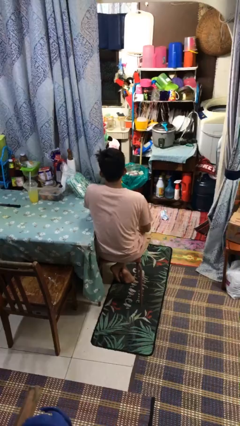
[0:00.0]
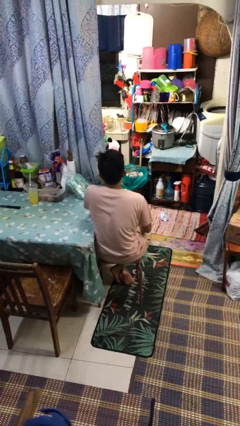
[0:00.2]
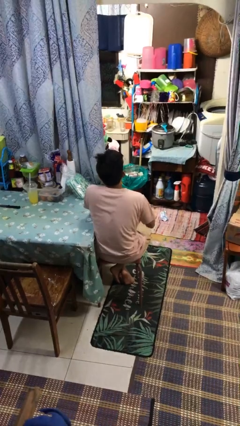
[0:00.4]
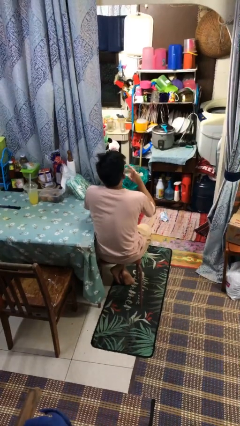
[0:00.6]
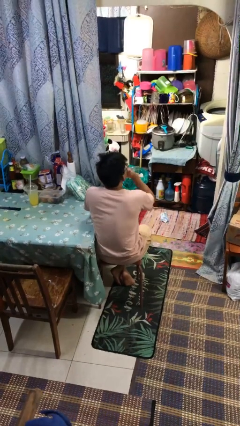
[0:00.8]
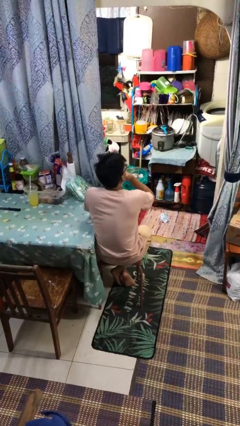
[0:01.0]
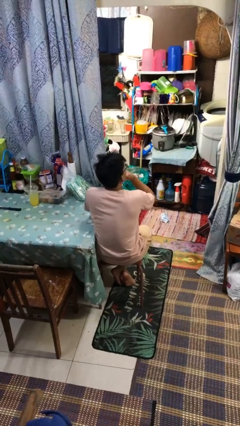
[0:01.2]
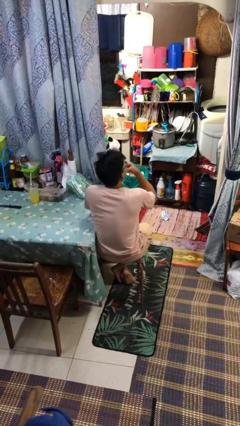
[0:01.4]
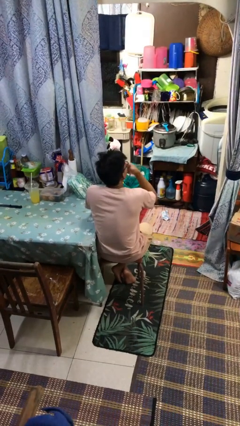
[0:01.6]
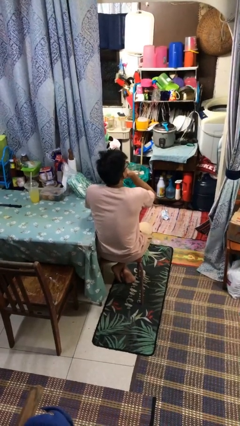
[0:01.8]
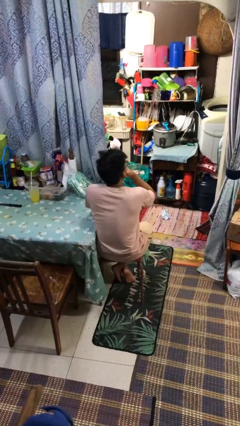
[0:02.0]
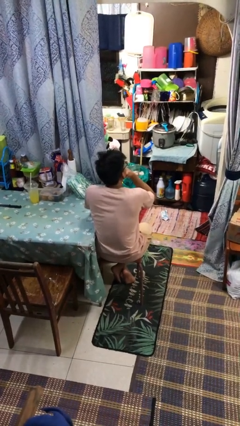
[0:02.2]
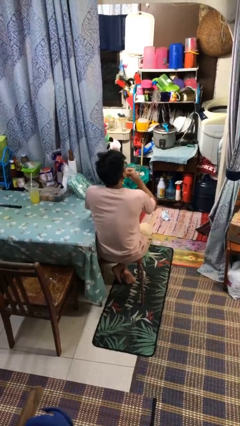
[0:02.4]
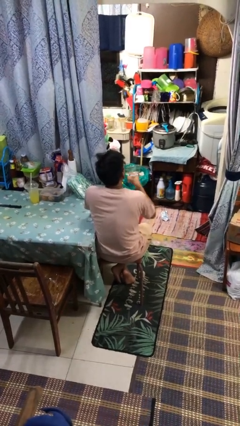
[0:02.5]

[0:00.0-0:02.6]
person strokes chin

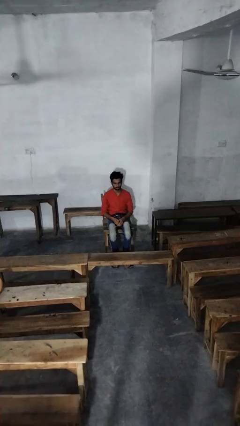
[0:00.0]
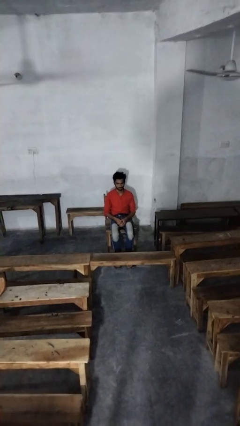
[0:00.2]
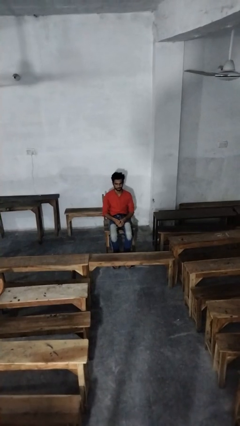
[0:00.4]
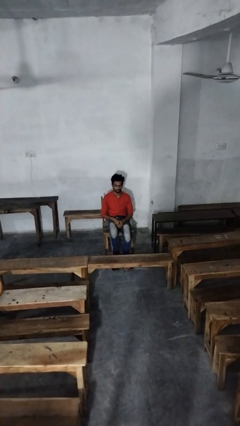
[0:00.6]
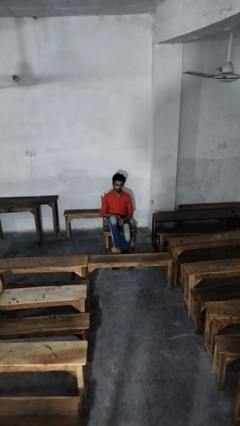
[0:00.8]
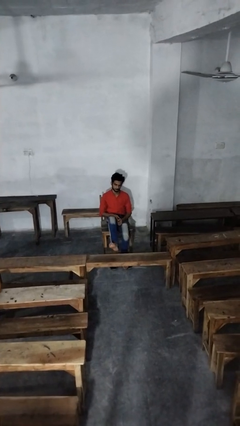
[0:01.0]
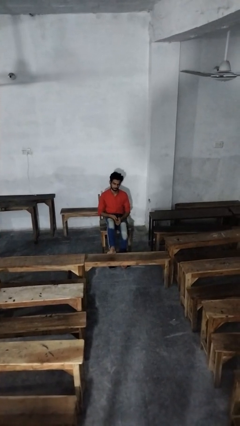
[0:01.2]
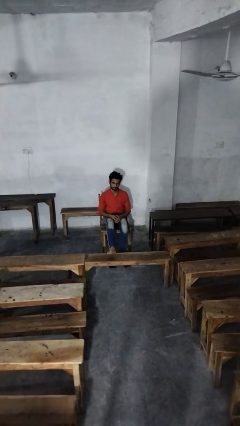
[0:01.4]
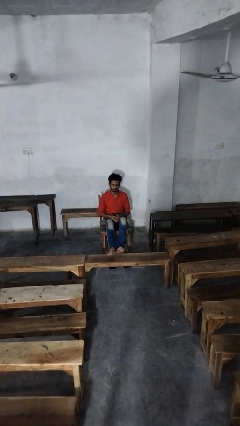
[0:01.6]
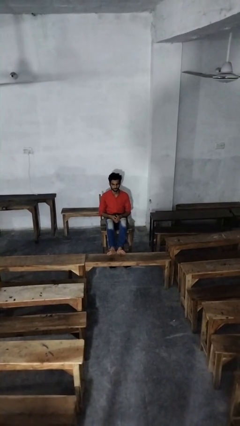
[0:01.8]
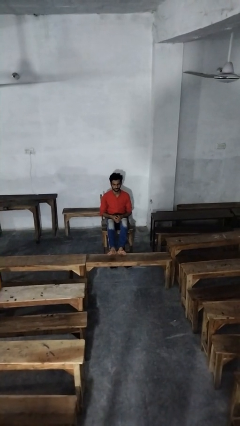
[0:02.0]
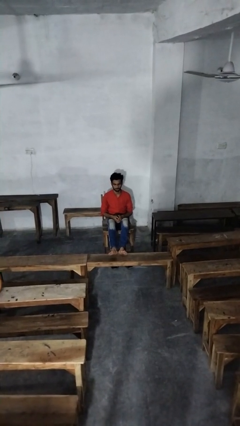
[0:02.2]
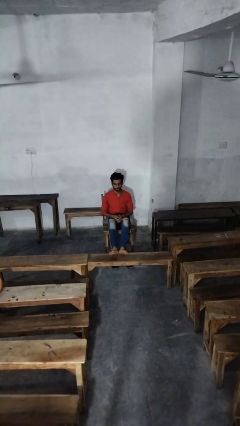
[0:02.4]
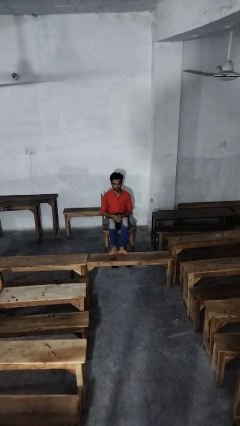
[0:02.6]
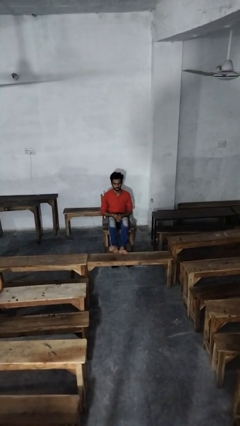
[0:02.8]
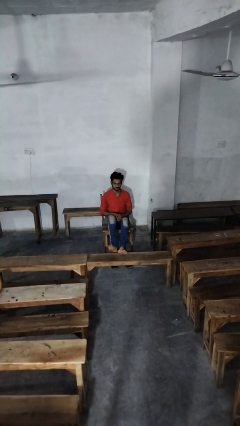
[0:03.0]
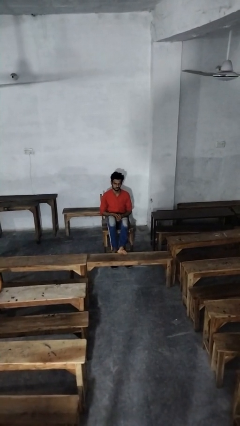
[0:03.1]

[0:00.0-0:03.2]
person puts feet up

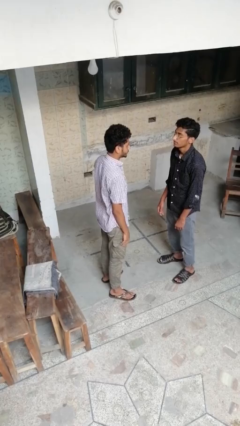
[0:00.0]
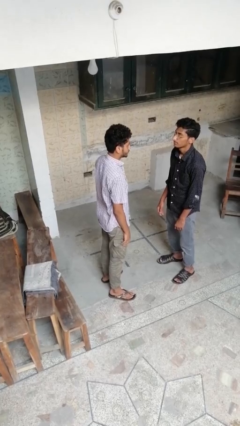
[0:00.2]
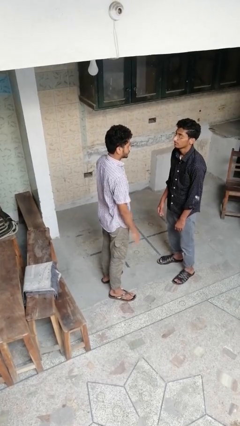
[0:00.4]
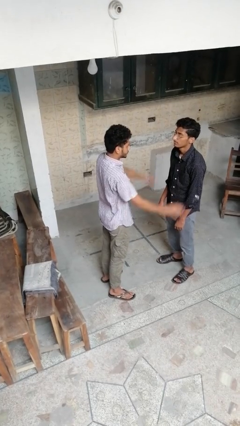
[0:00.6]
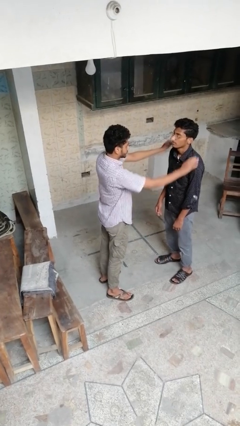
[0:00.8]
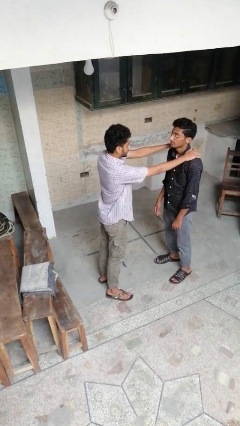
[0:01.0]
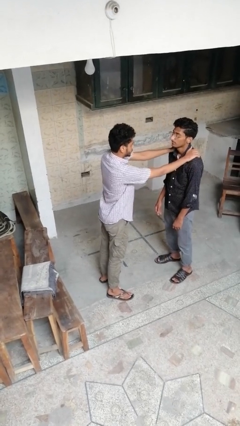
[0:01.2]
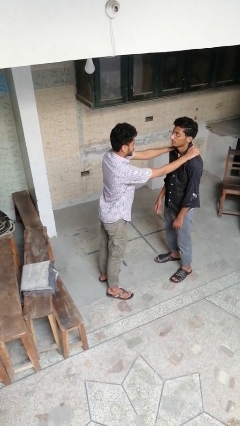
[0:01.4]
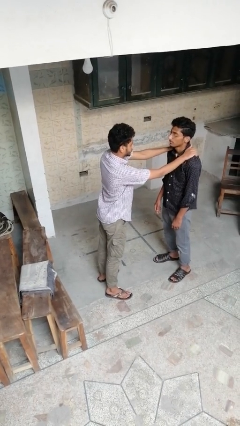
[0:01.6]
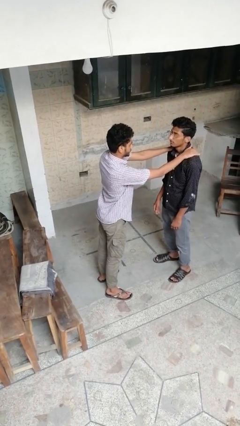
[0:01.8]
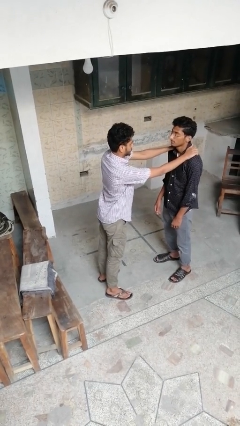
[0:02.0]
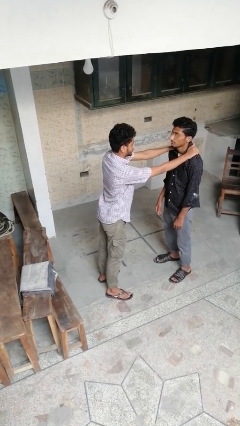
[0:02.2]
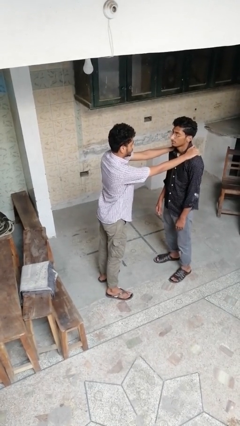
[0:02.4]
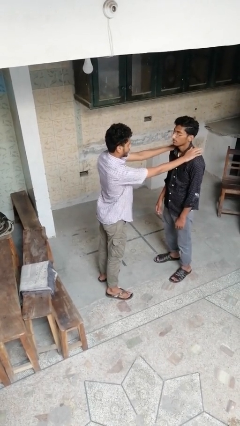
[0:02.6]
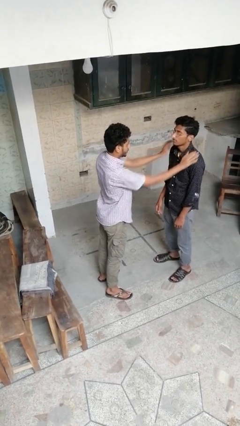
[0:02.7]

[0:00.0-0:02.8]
person pounds shoulders of person

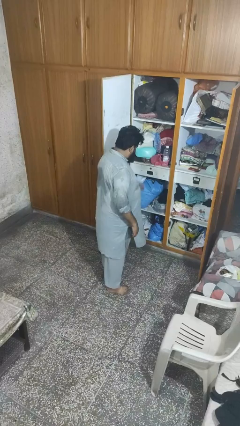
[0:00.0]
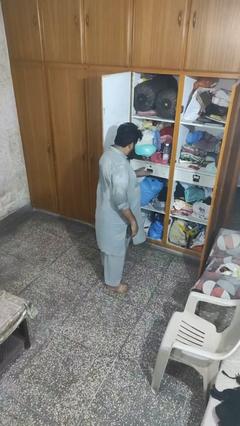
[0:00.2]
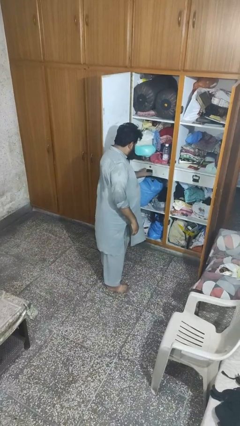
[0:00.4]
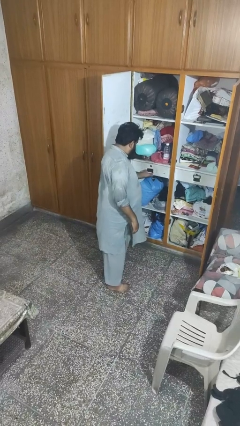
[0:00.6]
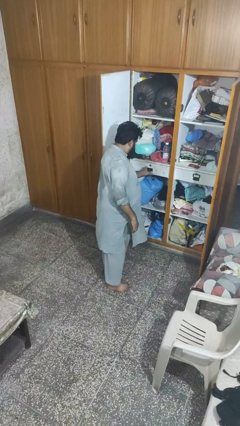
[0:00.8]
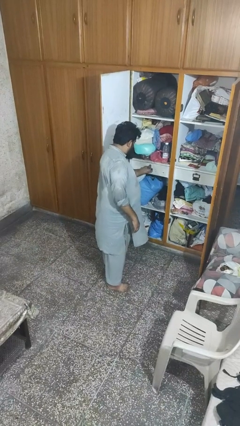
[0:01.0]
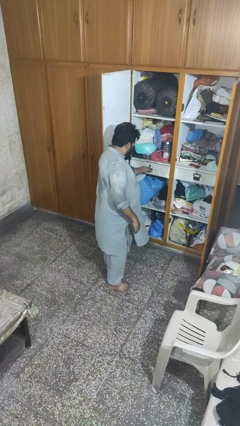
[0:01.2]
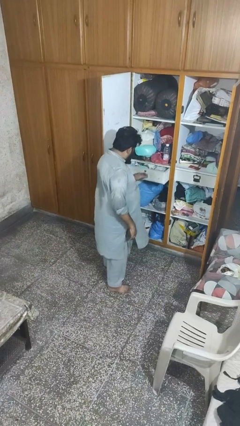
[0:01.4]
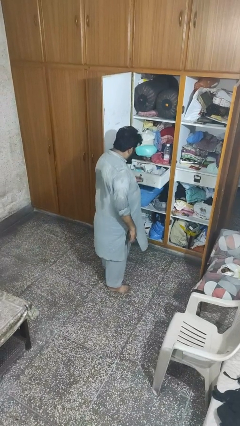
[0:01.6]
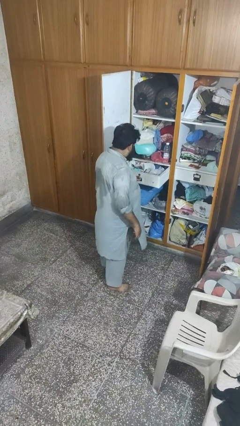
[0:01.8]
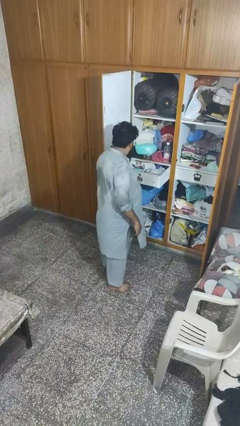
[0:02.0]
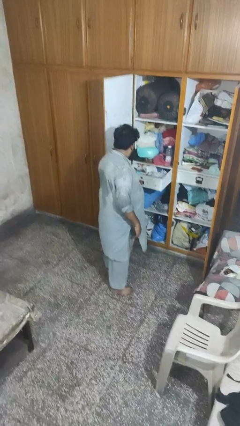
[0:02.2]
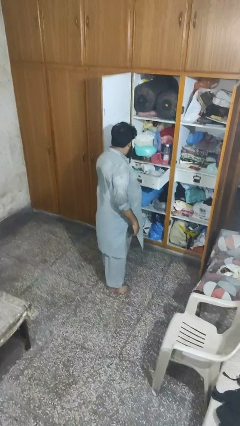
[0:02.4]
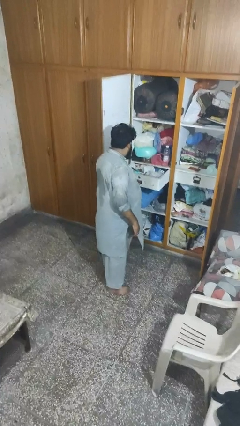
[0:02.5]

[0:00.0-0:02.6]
person opens dresser drawer

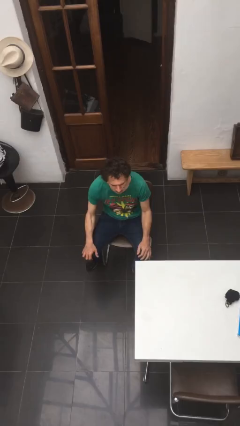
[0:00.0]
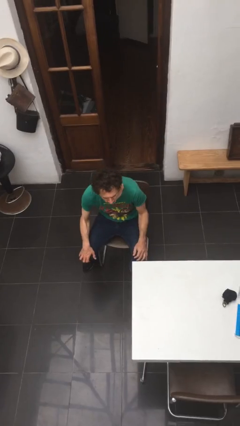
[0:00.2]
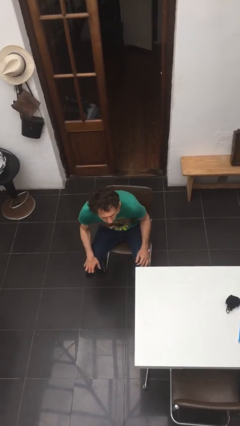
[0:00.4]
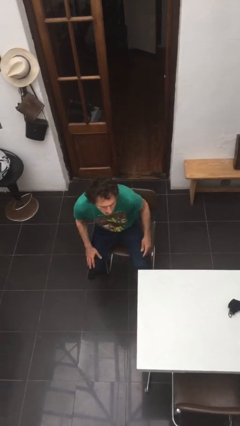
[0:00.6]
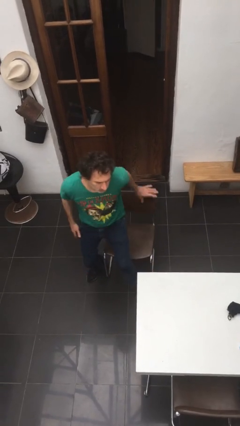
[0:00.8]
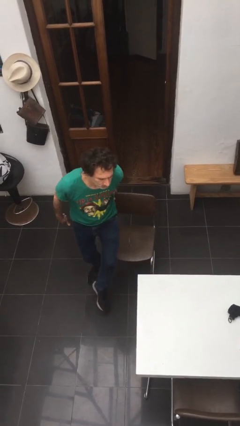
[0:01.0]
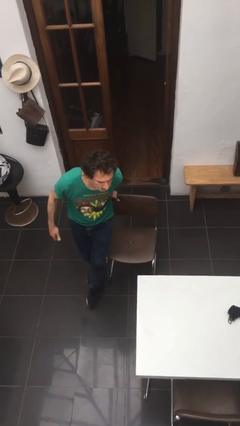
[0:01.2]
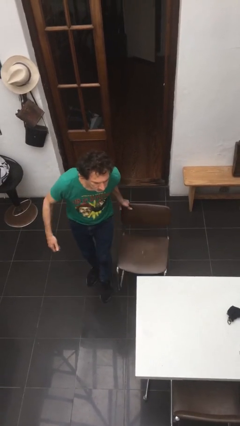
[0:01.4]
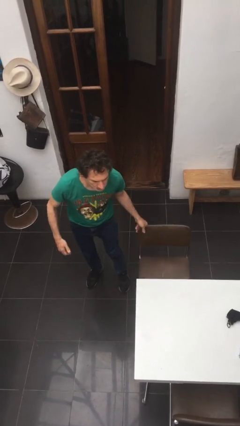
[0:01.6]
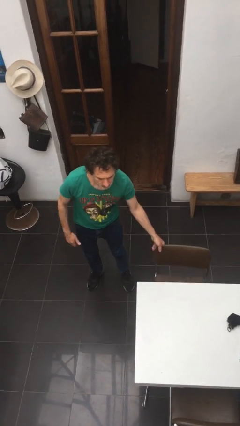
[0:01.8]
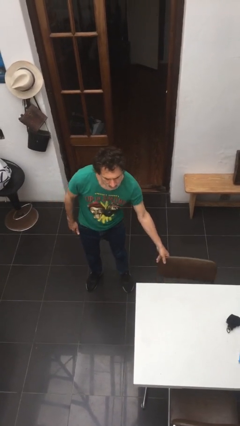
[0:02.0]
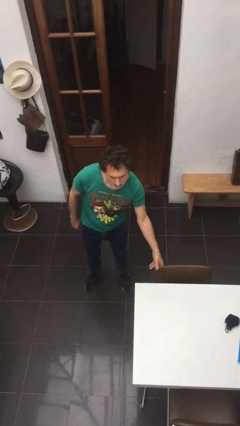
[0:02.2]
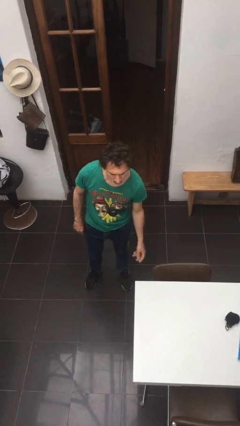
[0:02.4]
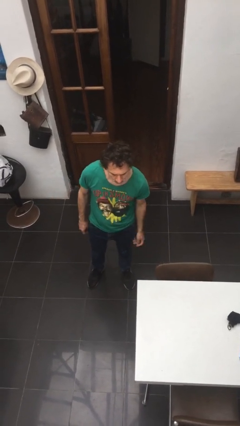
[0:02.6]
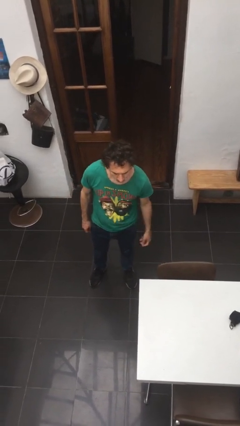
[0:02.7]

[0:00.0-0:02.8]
person stands up

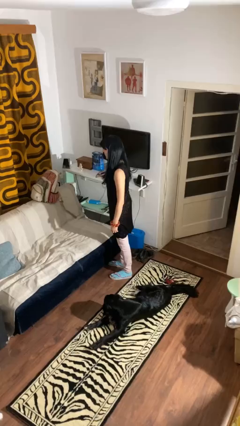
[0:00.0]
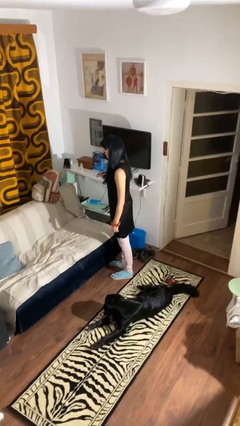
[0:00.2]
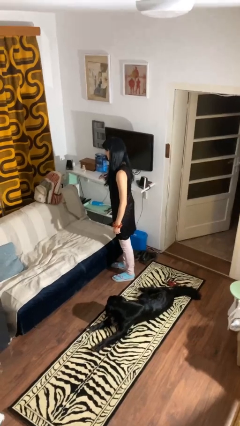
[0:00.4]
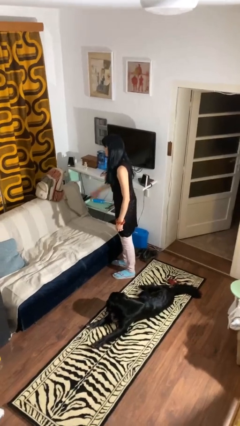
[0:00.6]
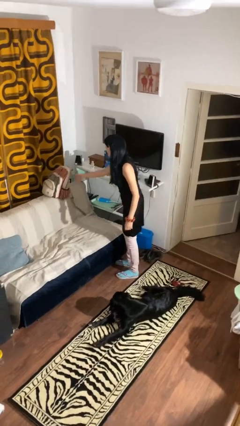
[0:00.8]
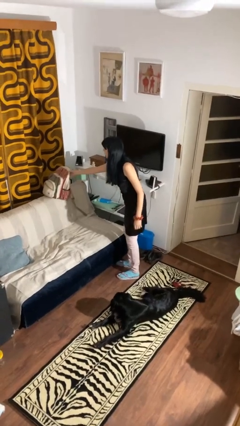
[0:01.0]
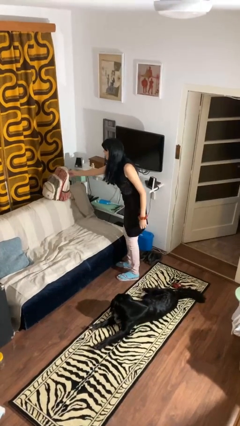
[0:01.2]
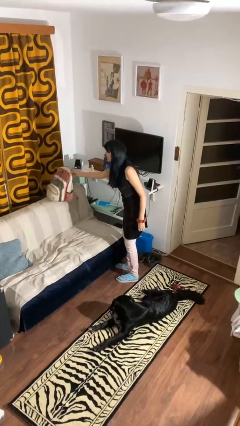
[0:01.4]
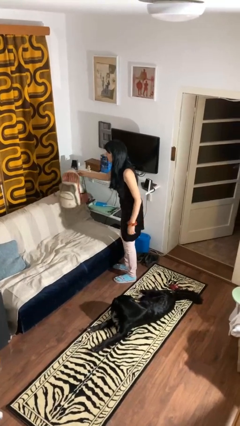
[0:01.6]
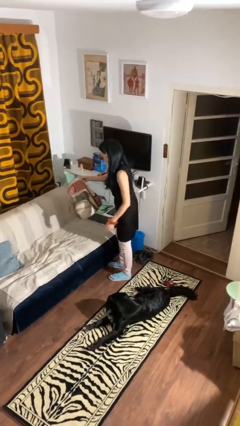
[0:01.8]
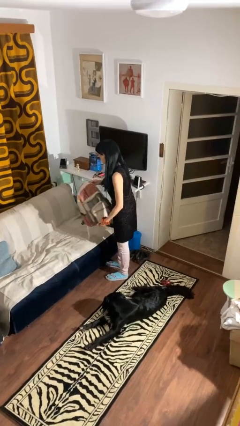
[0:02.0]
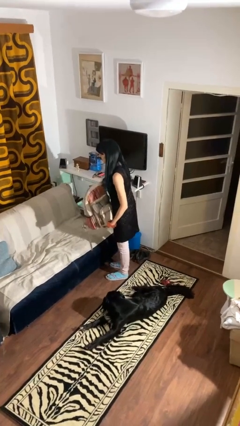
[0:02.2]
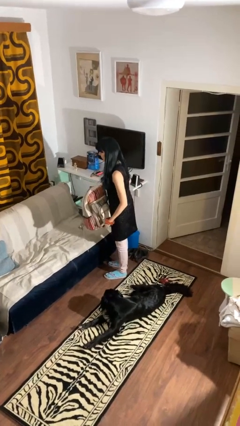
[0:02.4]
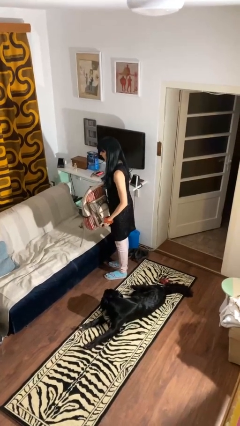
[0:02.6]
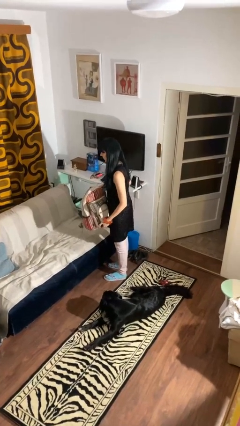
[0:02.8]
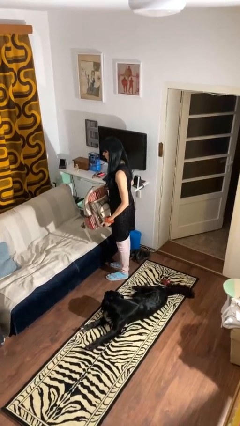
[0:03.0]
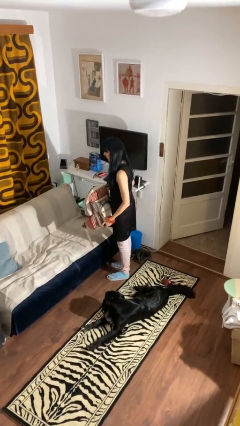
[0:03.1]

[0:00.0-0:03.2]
person picks up object from couch
